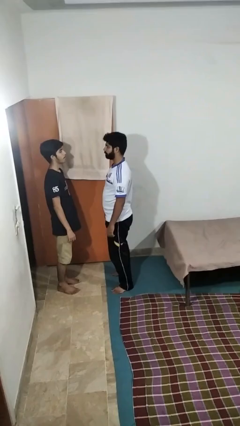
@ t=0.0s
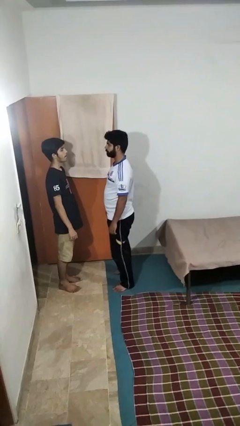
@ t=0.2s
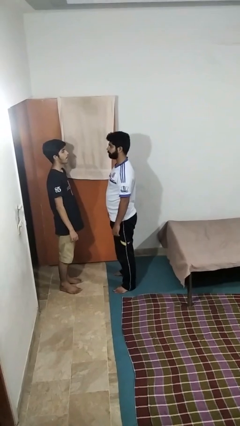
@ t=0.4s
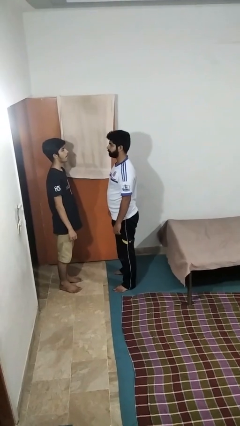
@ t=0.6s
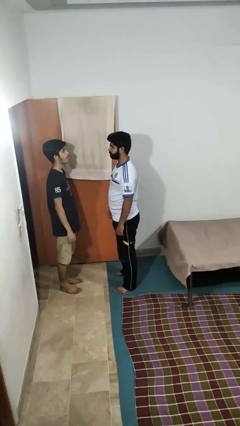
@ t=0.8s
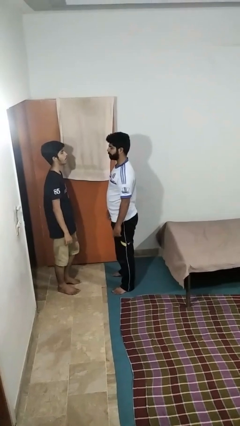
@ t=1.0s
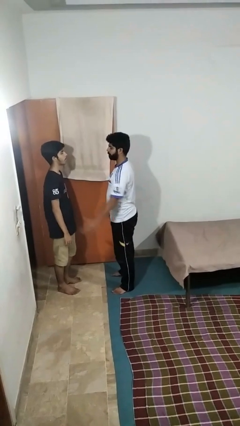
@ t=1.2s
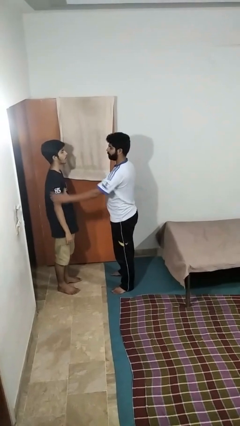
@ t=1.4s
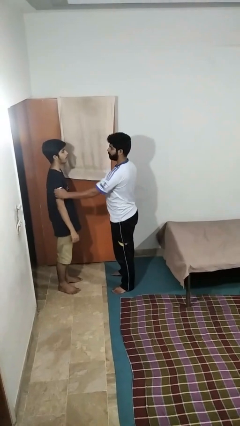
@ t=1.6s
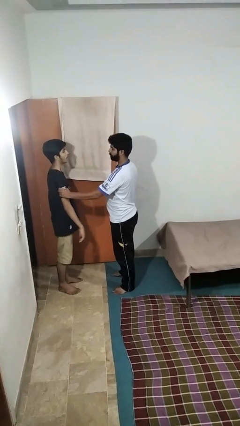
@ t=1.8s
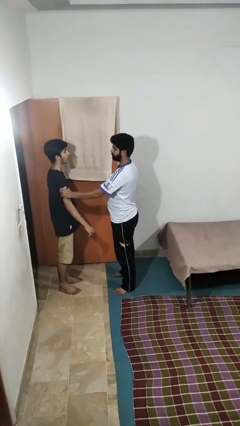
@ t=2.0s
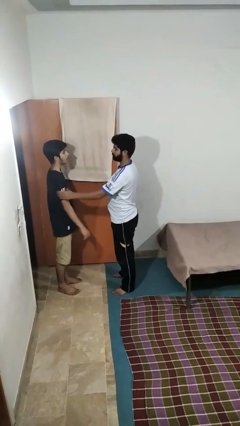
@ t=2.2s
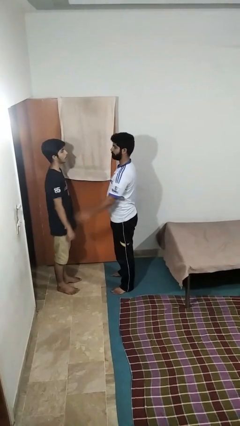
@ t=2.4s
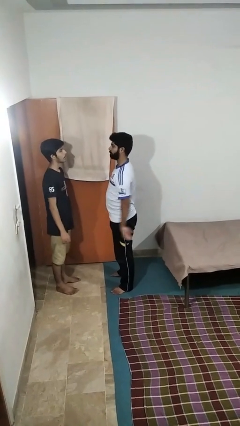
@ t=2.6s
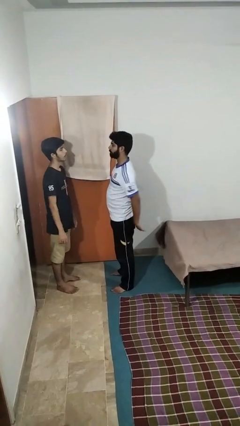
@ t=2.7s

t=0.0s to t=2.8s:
person grabs person by bicep

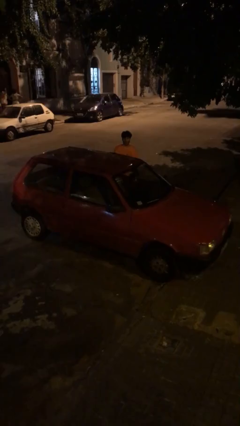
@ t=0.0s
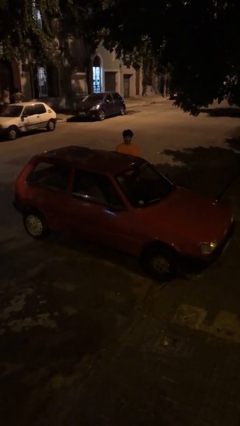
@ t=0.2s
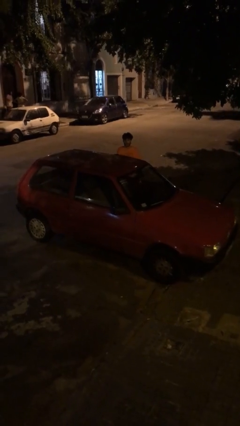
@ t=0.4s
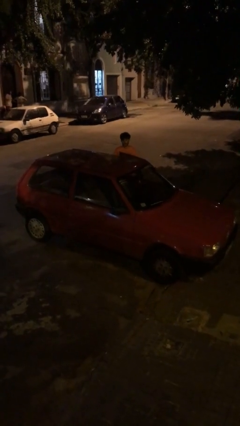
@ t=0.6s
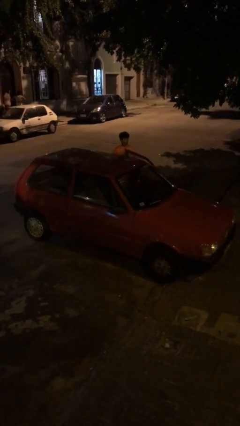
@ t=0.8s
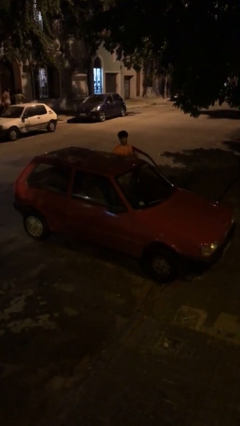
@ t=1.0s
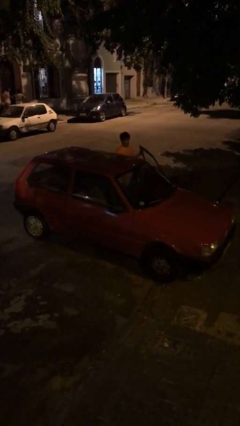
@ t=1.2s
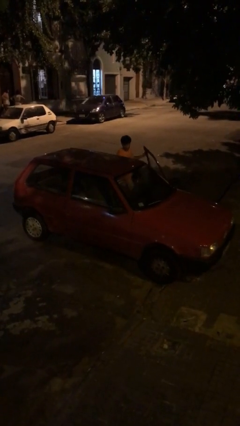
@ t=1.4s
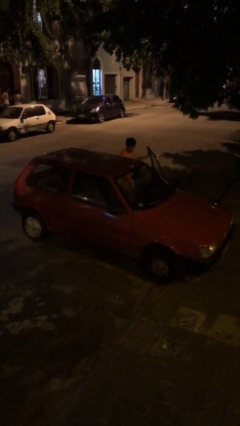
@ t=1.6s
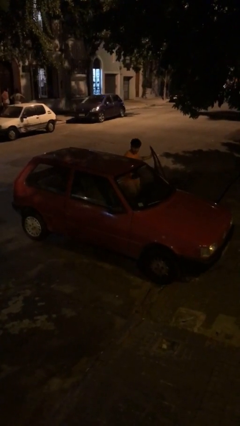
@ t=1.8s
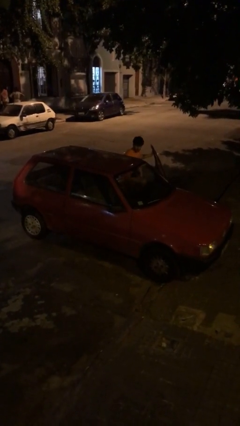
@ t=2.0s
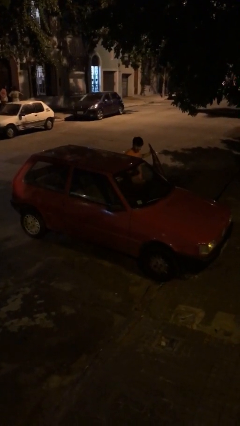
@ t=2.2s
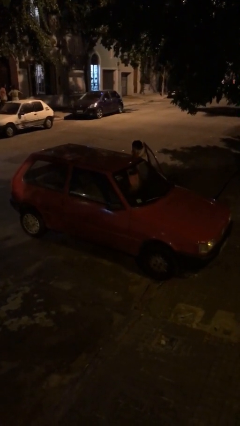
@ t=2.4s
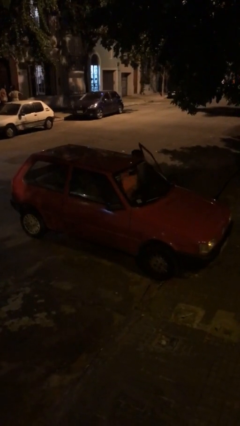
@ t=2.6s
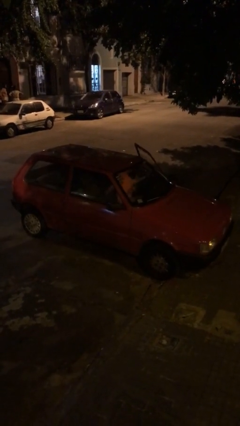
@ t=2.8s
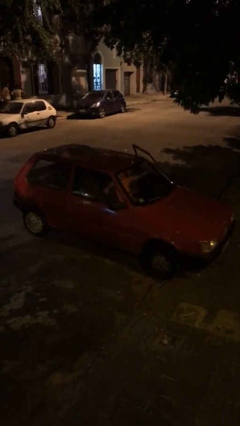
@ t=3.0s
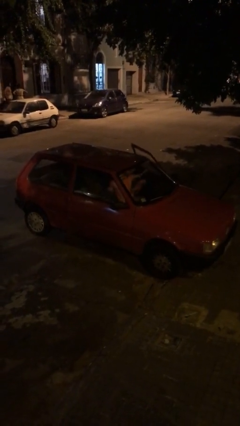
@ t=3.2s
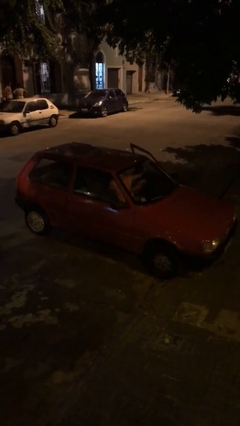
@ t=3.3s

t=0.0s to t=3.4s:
car picks up person

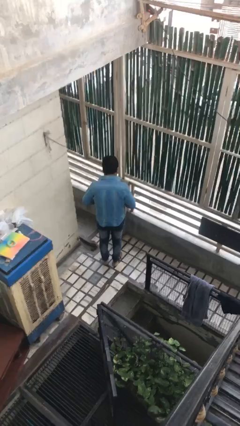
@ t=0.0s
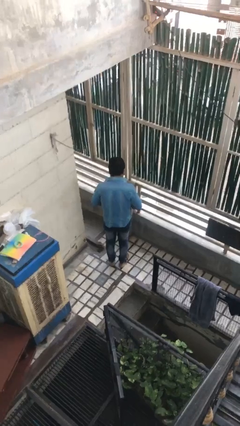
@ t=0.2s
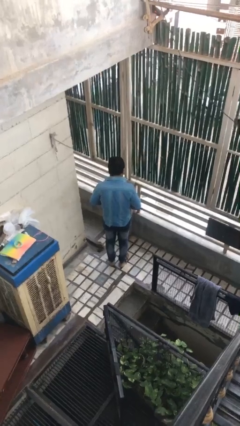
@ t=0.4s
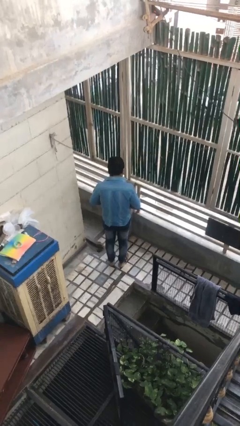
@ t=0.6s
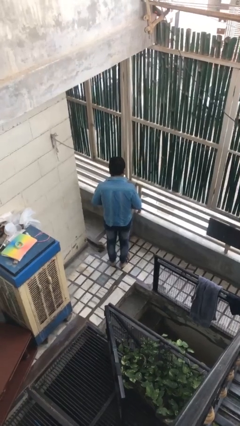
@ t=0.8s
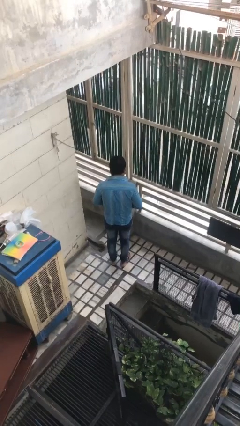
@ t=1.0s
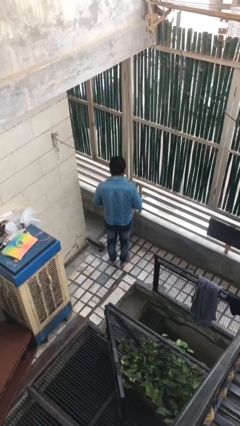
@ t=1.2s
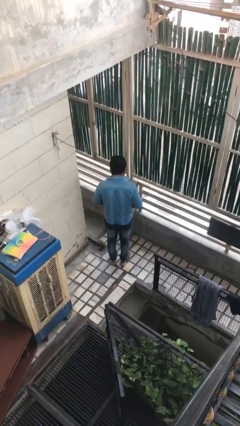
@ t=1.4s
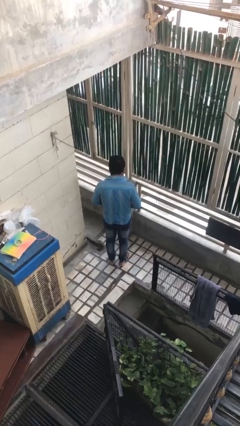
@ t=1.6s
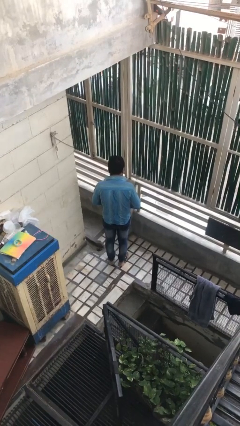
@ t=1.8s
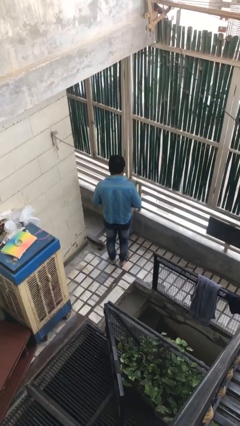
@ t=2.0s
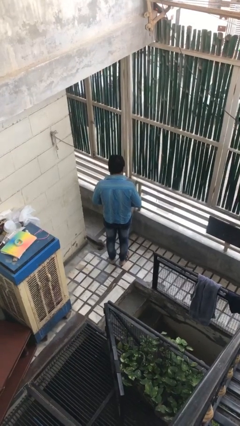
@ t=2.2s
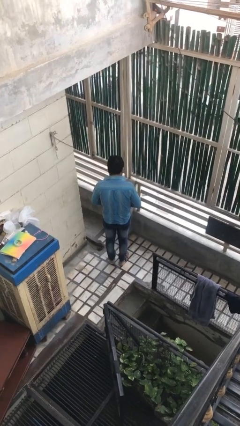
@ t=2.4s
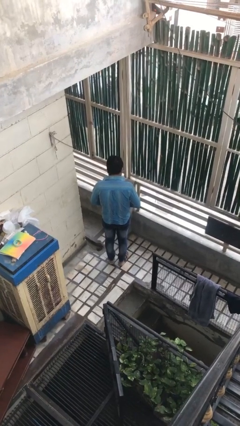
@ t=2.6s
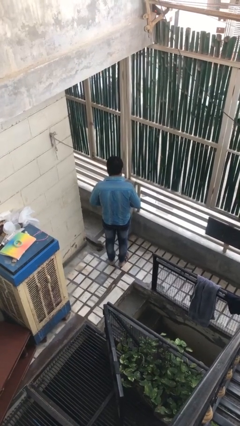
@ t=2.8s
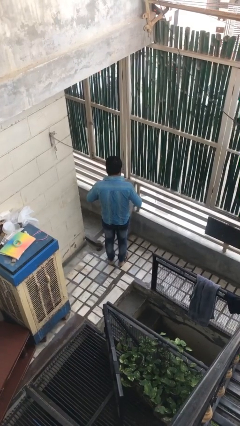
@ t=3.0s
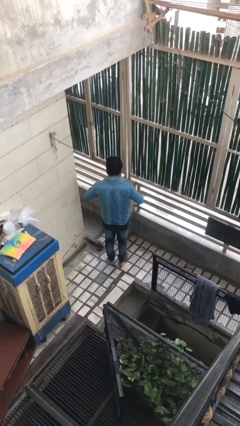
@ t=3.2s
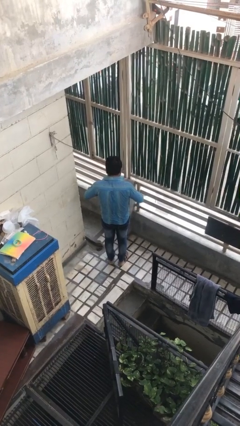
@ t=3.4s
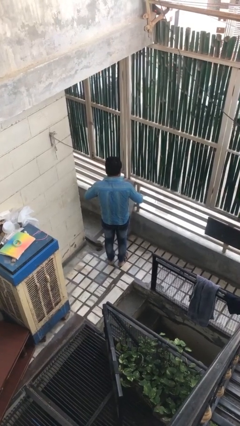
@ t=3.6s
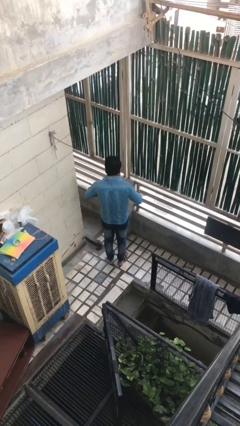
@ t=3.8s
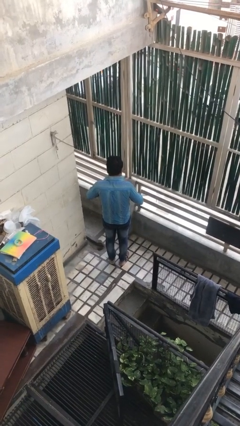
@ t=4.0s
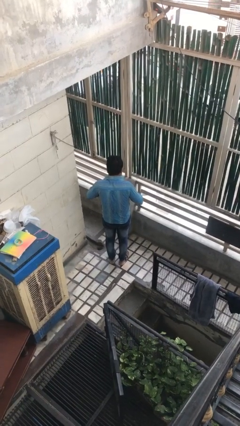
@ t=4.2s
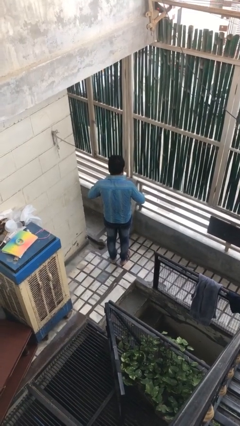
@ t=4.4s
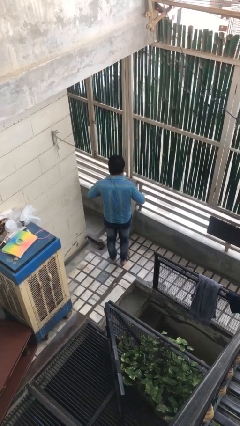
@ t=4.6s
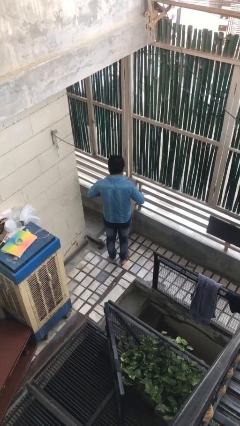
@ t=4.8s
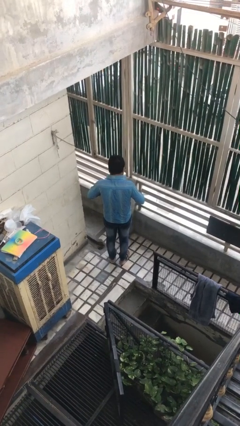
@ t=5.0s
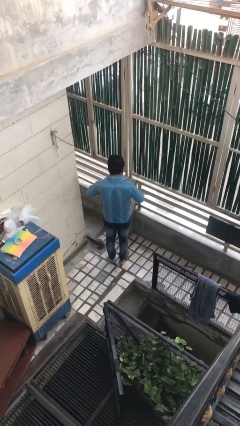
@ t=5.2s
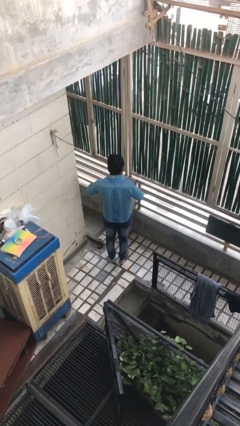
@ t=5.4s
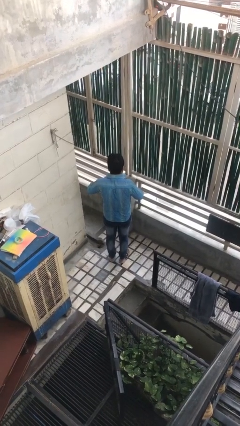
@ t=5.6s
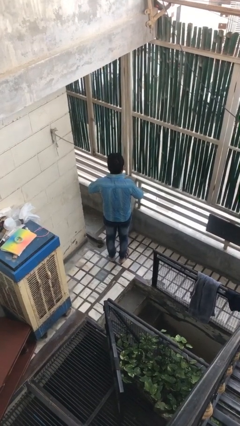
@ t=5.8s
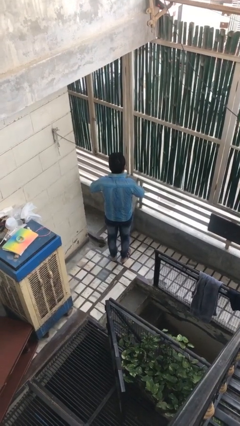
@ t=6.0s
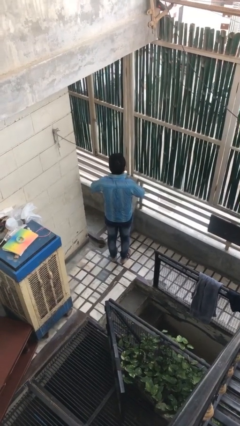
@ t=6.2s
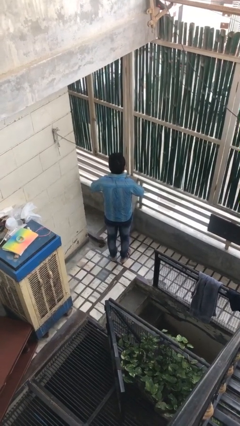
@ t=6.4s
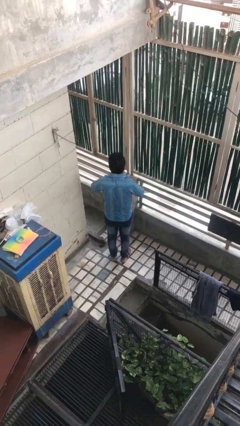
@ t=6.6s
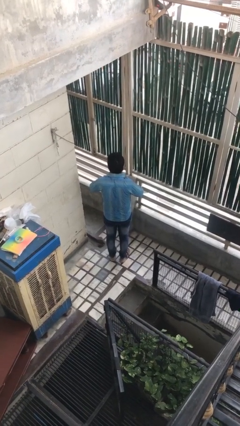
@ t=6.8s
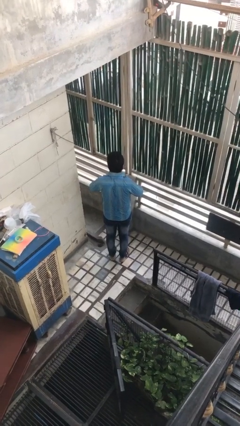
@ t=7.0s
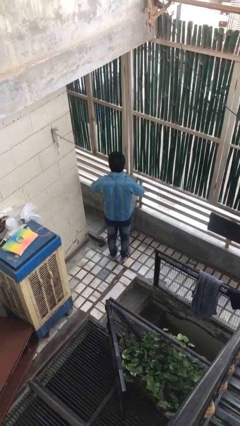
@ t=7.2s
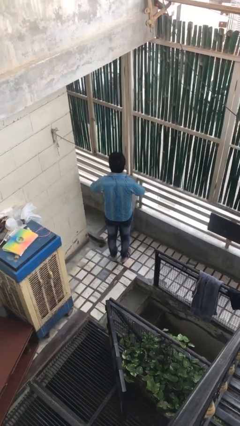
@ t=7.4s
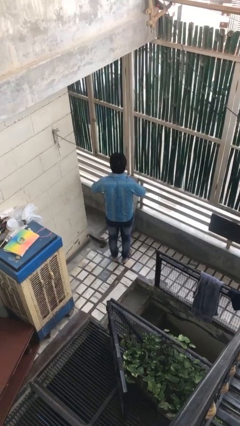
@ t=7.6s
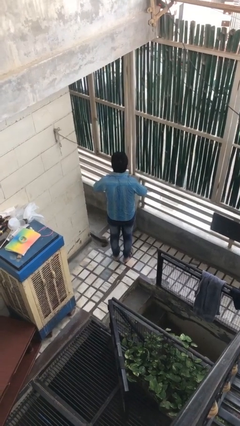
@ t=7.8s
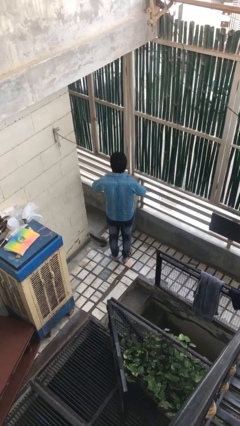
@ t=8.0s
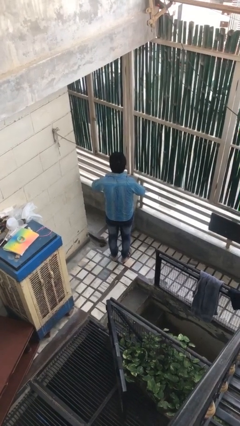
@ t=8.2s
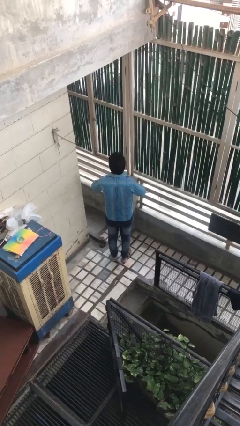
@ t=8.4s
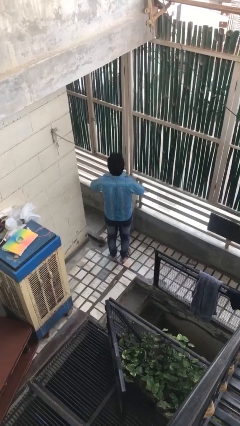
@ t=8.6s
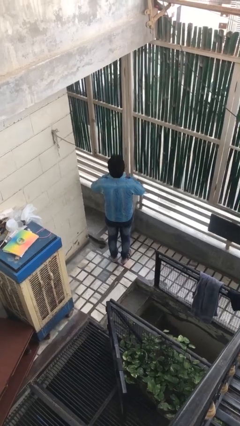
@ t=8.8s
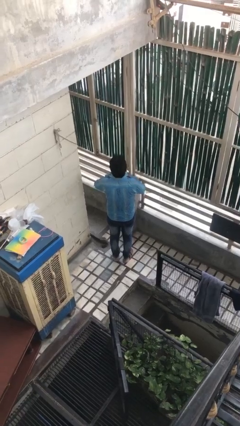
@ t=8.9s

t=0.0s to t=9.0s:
person buttons shirt

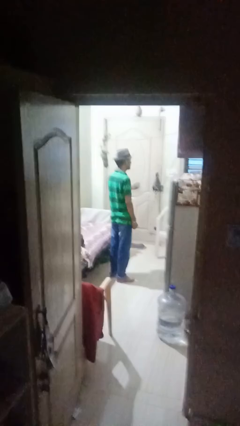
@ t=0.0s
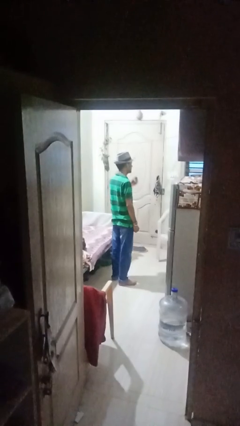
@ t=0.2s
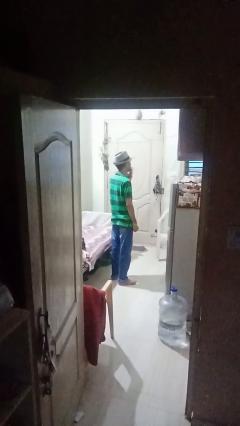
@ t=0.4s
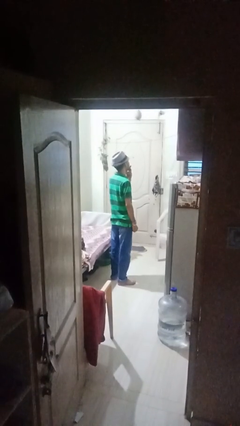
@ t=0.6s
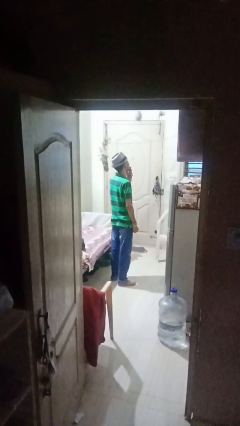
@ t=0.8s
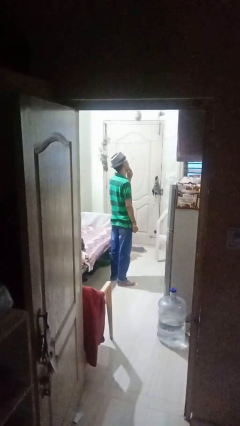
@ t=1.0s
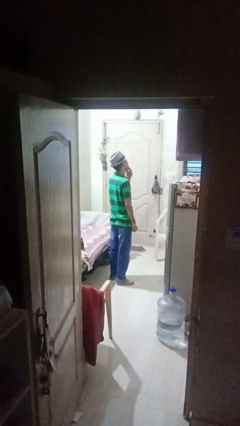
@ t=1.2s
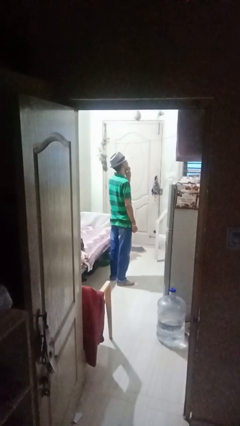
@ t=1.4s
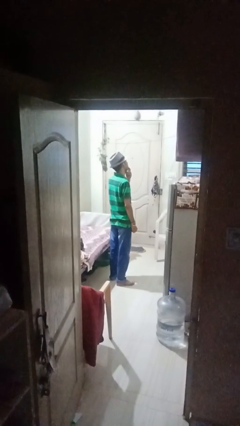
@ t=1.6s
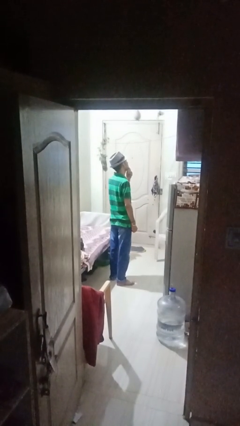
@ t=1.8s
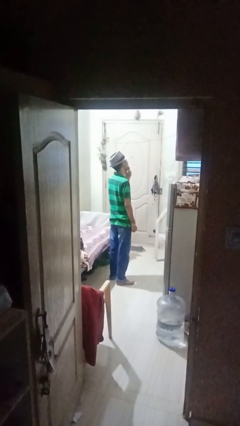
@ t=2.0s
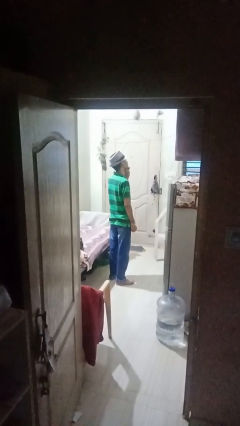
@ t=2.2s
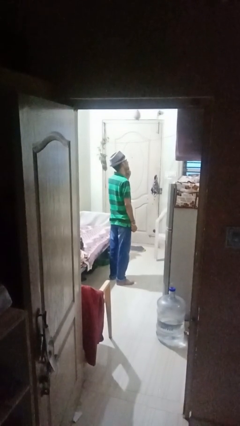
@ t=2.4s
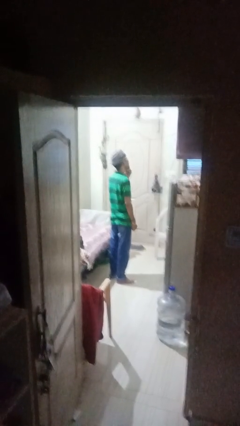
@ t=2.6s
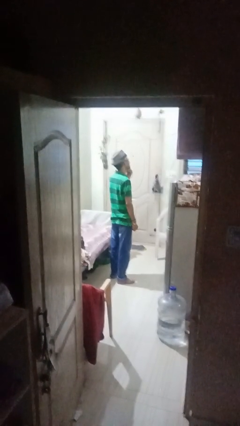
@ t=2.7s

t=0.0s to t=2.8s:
person strokes chin
